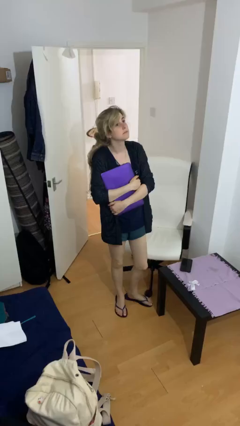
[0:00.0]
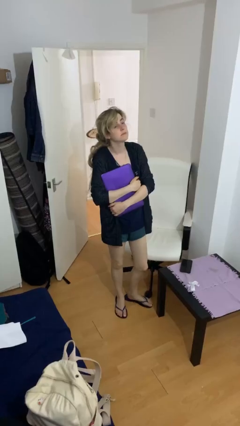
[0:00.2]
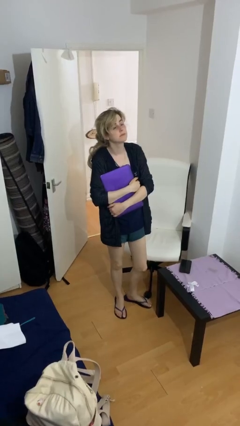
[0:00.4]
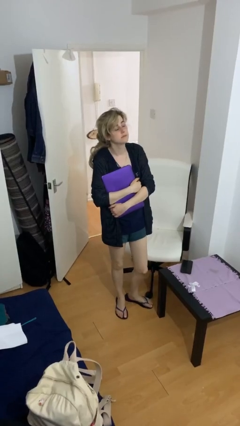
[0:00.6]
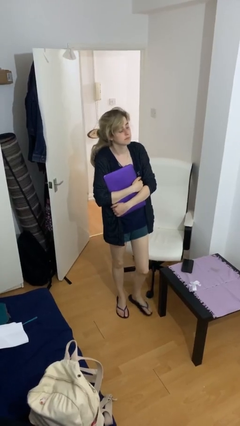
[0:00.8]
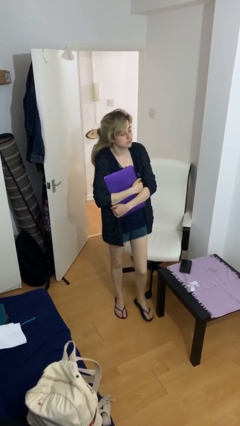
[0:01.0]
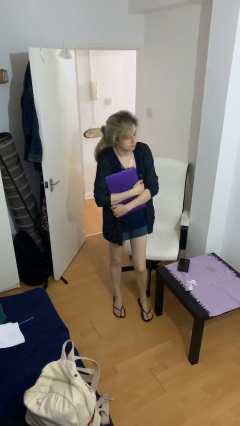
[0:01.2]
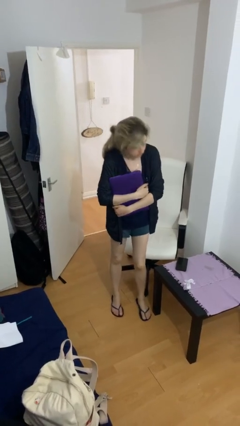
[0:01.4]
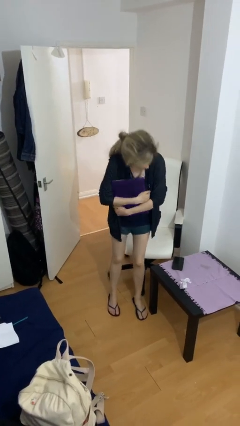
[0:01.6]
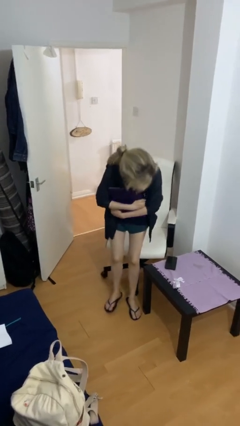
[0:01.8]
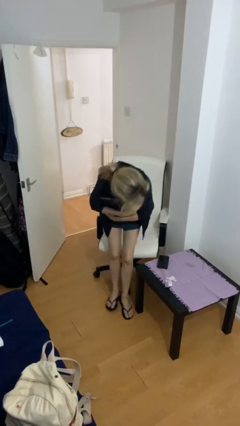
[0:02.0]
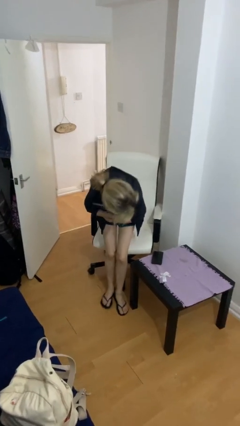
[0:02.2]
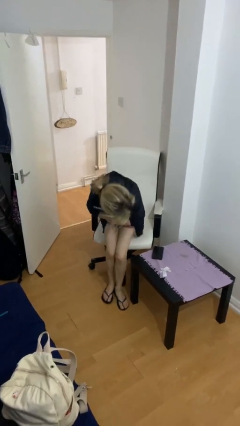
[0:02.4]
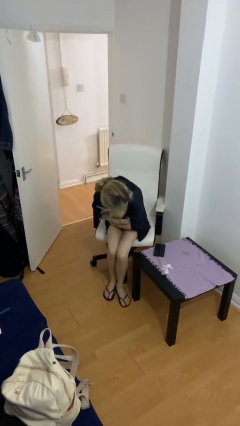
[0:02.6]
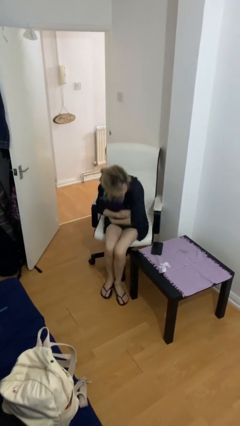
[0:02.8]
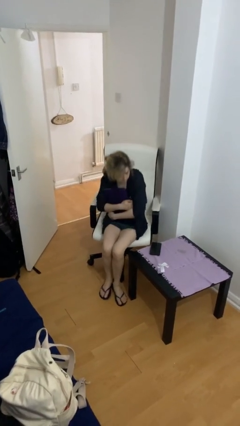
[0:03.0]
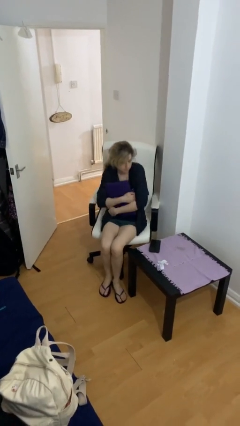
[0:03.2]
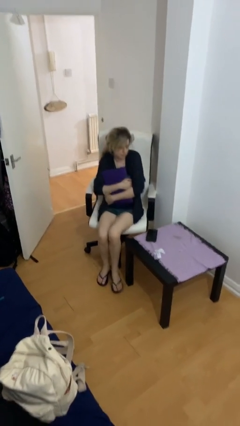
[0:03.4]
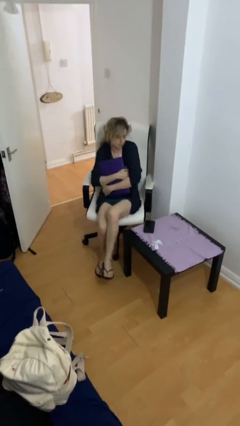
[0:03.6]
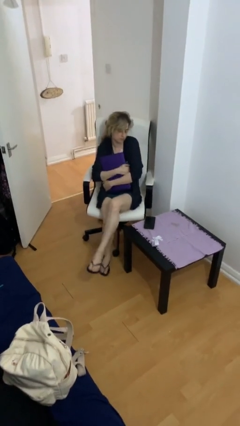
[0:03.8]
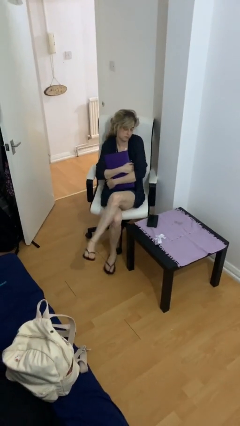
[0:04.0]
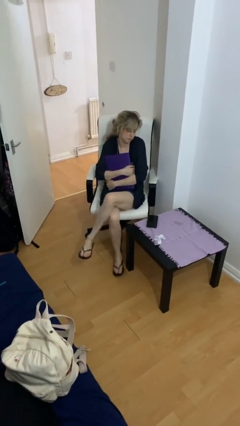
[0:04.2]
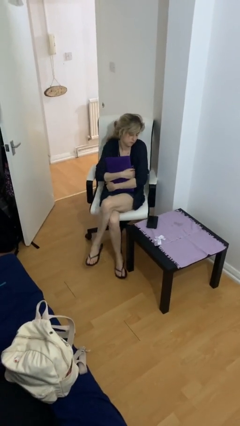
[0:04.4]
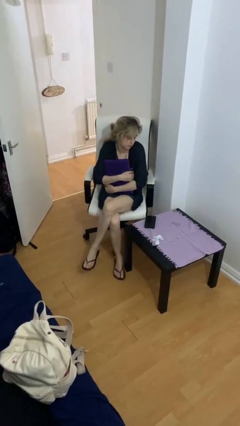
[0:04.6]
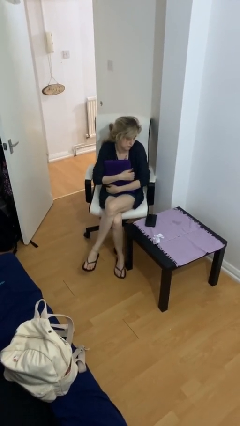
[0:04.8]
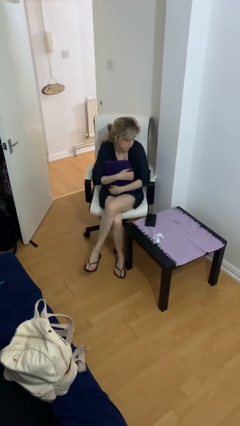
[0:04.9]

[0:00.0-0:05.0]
person sits down

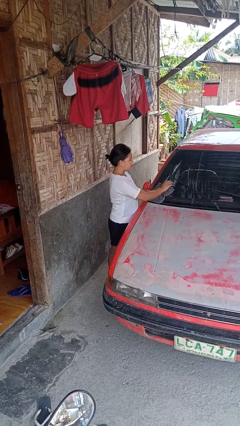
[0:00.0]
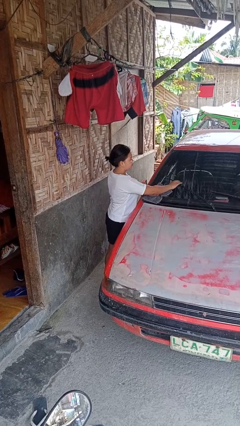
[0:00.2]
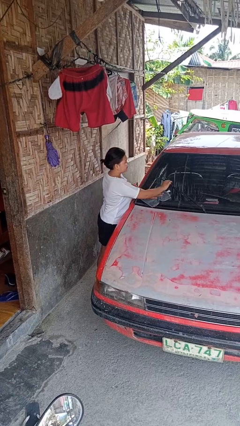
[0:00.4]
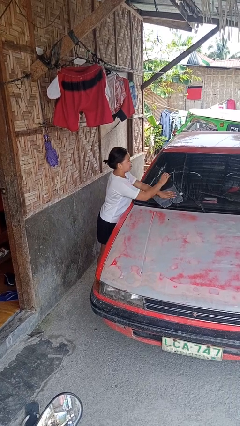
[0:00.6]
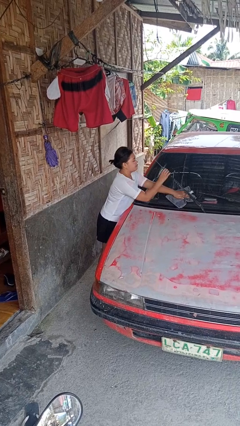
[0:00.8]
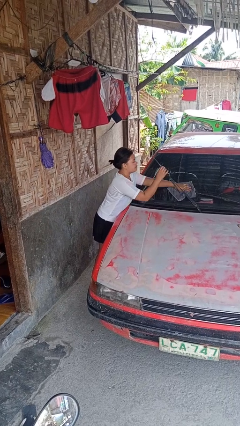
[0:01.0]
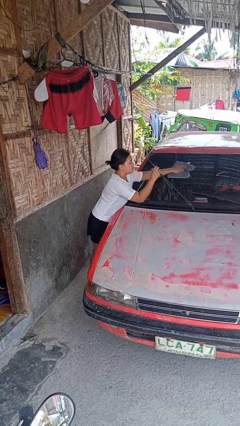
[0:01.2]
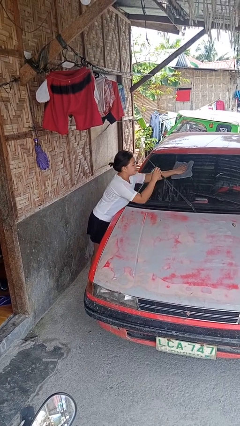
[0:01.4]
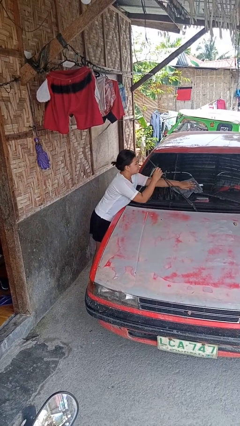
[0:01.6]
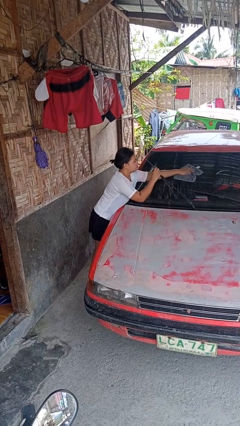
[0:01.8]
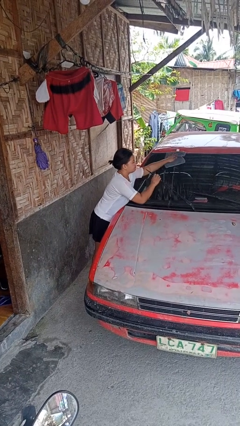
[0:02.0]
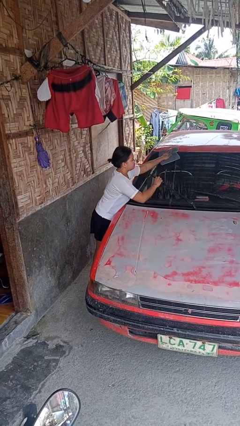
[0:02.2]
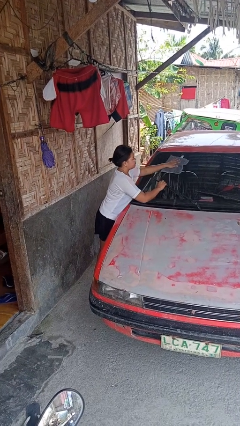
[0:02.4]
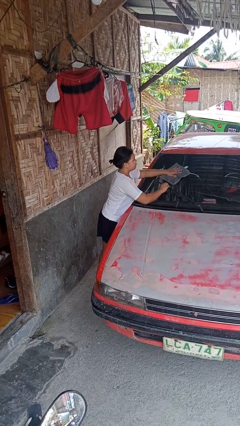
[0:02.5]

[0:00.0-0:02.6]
person polishes car with rag

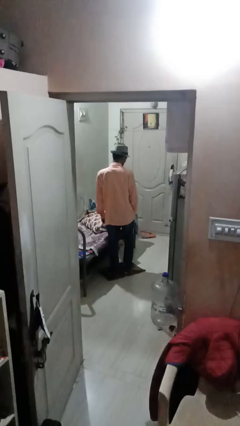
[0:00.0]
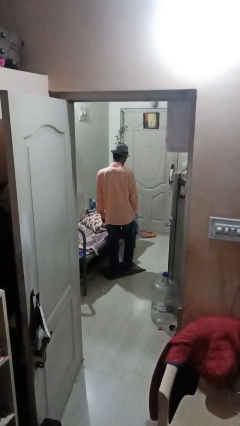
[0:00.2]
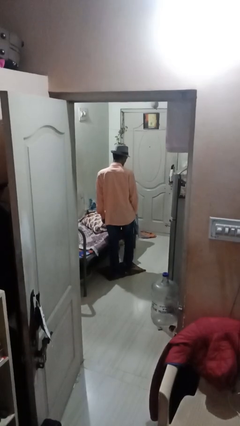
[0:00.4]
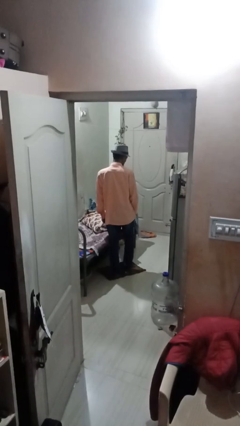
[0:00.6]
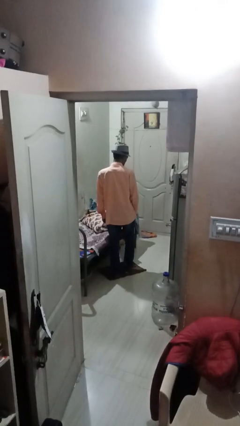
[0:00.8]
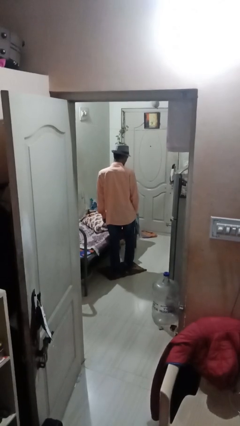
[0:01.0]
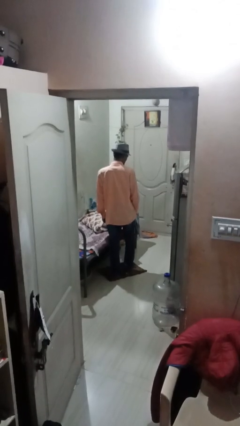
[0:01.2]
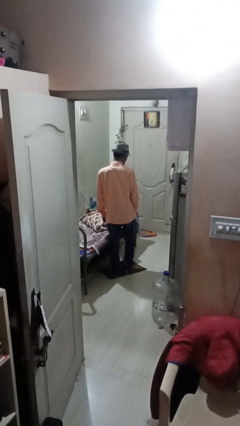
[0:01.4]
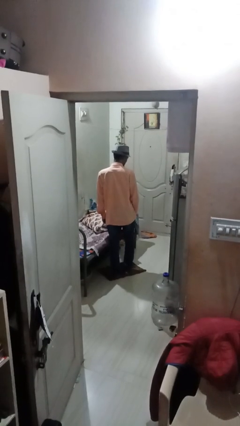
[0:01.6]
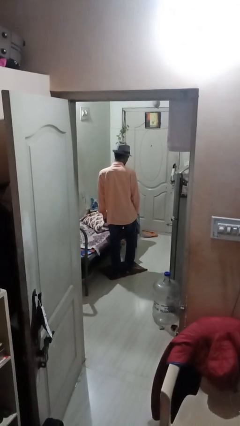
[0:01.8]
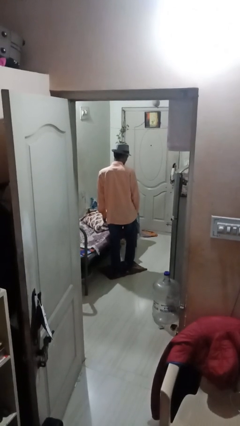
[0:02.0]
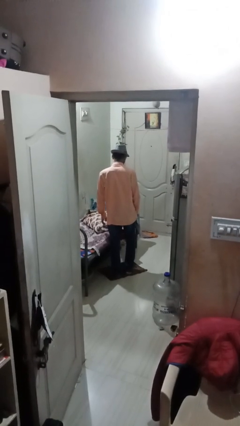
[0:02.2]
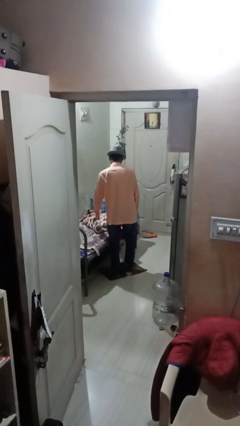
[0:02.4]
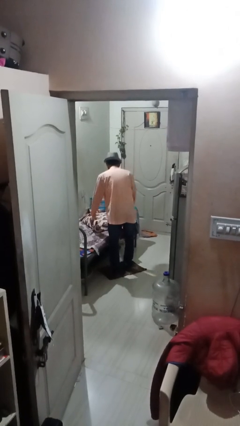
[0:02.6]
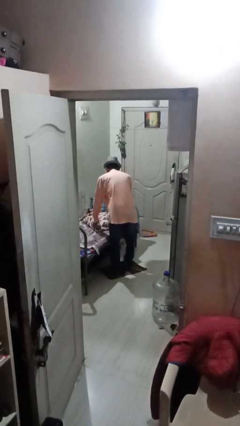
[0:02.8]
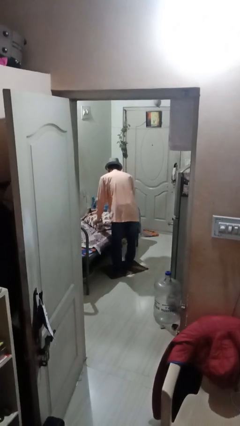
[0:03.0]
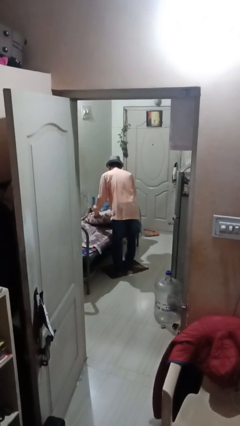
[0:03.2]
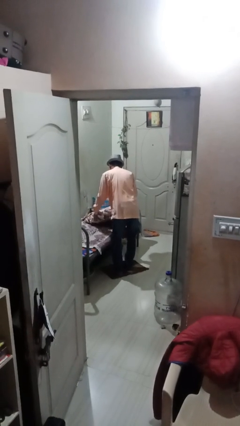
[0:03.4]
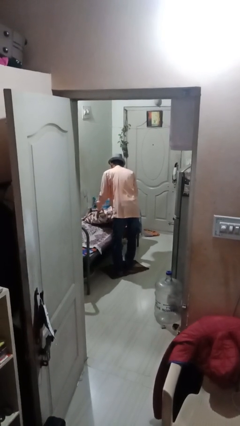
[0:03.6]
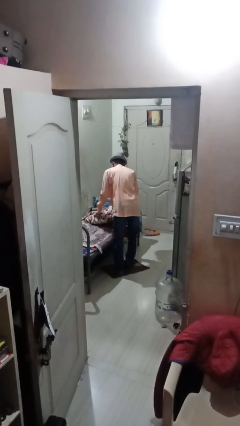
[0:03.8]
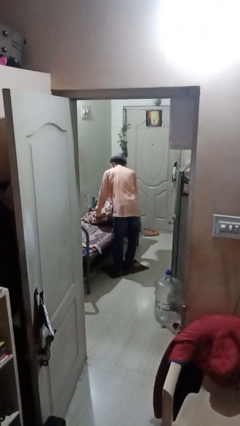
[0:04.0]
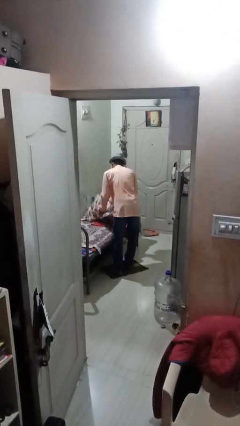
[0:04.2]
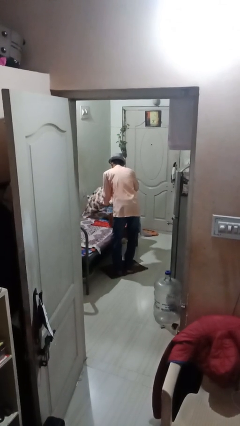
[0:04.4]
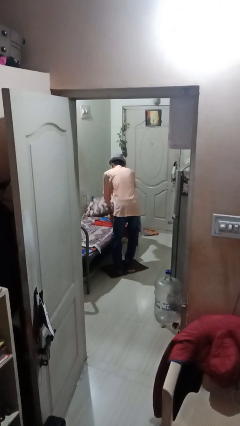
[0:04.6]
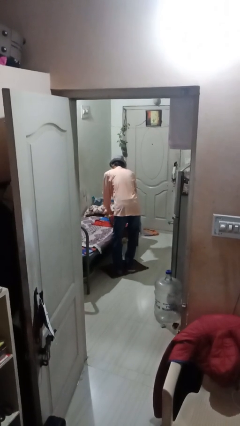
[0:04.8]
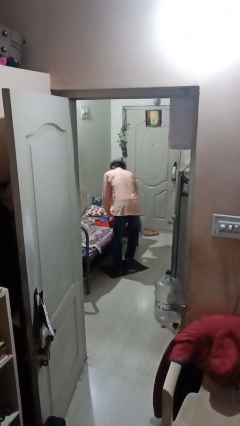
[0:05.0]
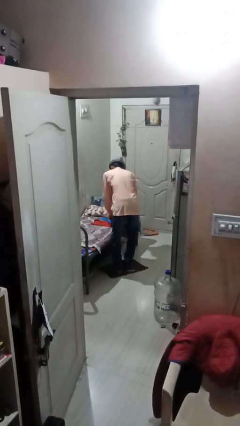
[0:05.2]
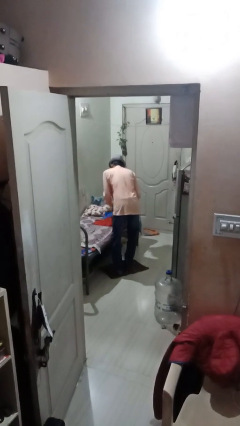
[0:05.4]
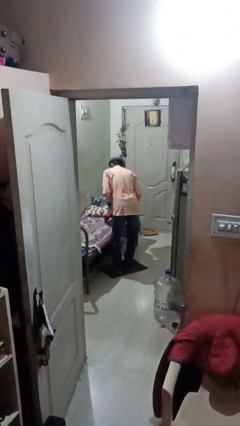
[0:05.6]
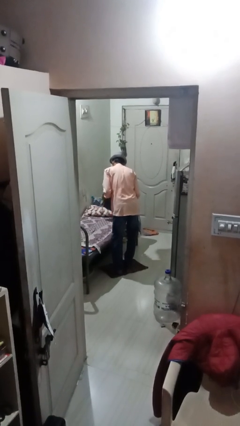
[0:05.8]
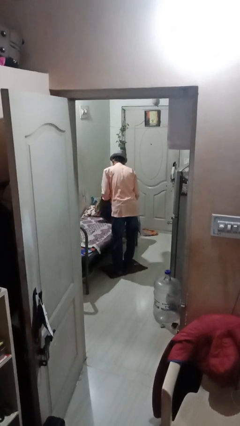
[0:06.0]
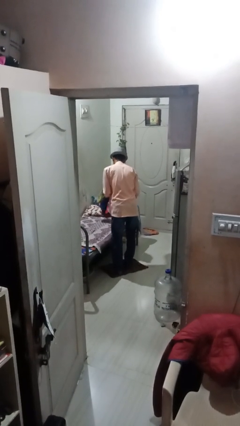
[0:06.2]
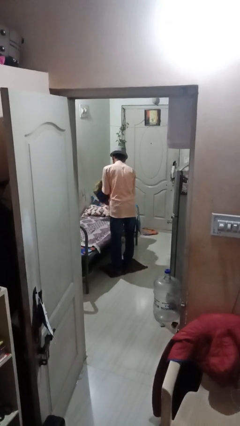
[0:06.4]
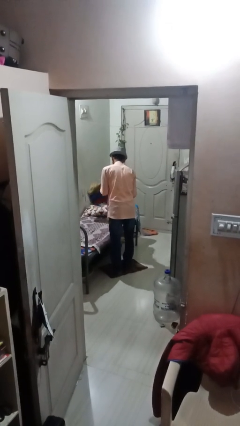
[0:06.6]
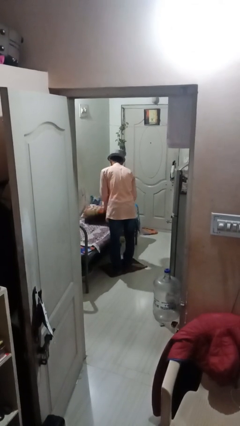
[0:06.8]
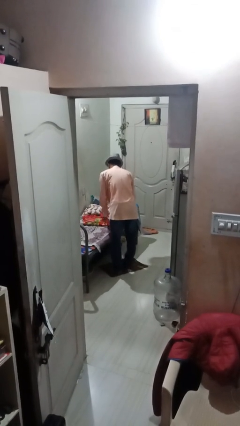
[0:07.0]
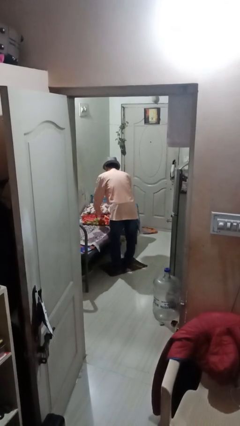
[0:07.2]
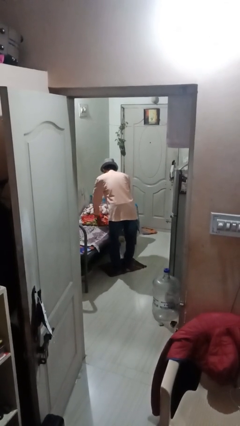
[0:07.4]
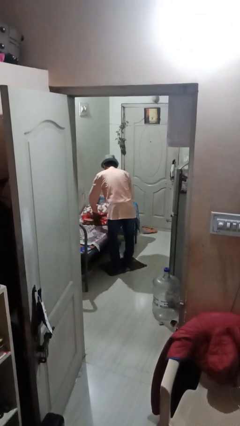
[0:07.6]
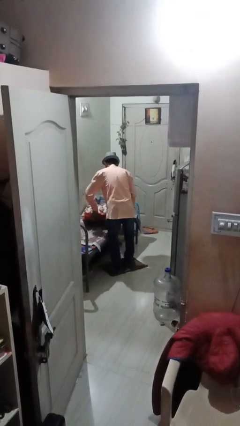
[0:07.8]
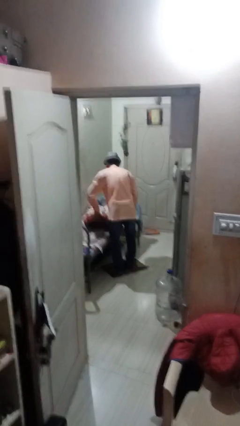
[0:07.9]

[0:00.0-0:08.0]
person makes bed

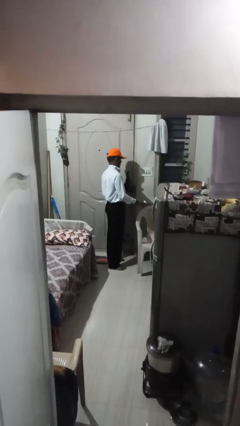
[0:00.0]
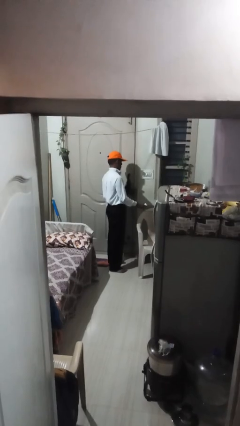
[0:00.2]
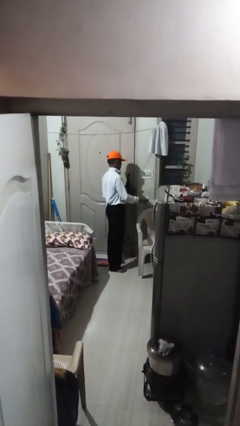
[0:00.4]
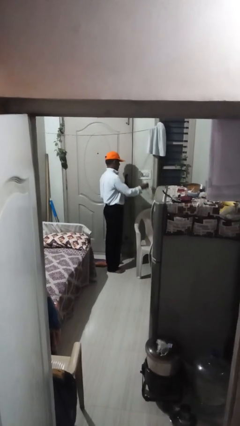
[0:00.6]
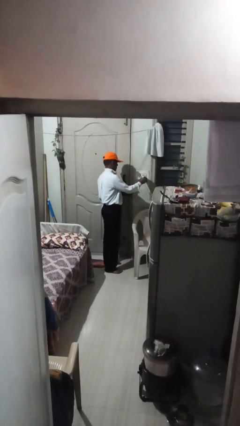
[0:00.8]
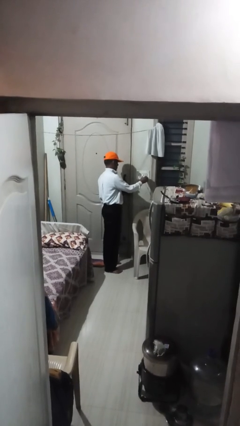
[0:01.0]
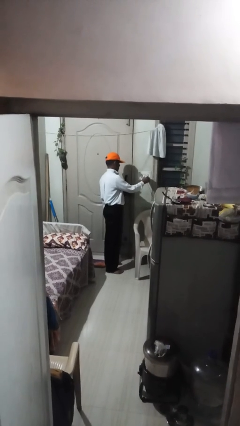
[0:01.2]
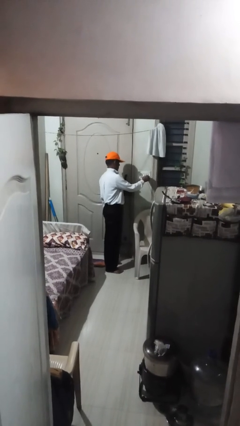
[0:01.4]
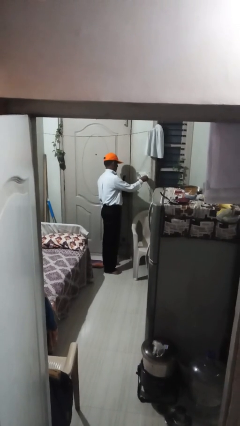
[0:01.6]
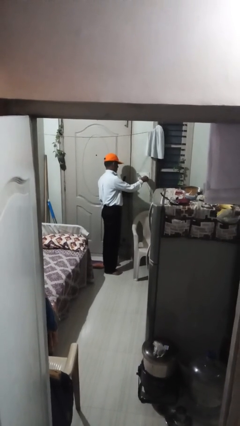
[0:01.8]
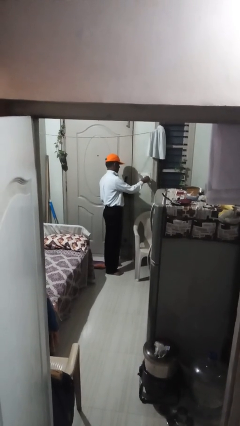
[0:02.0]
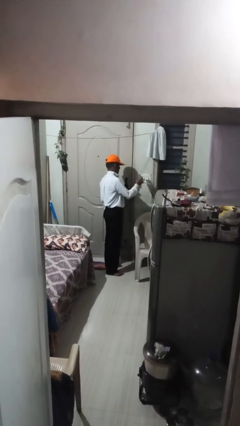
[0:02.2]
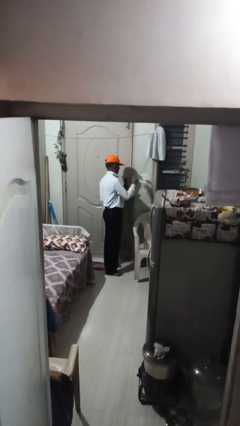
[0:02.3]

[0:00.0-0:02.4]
person plugs into electrical socket
